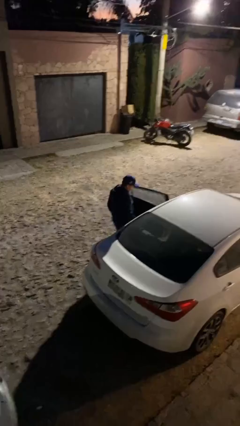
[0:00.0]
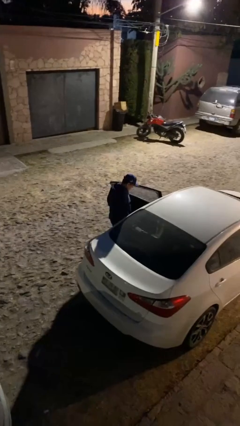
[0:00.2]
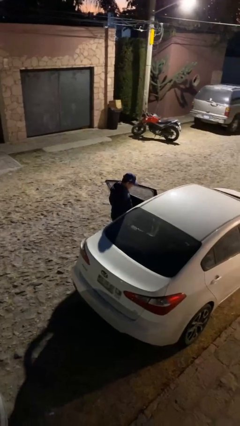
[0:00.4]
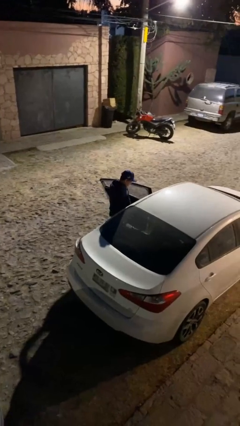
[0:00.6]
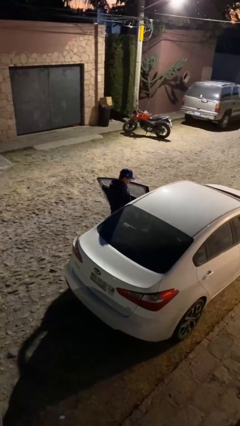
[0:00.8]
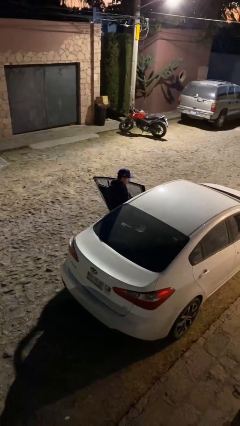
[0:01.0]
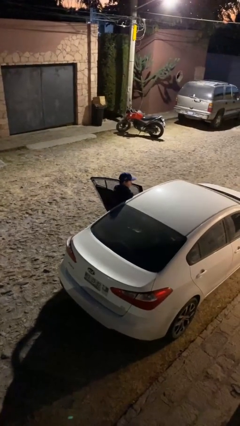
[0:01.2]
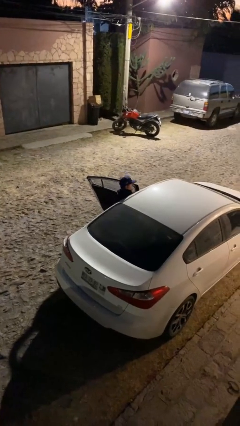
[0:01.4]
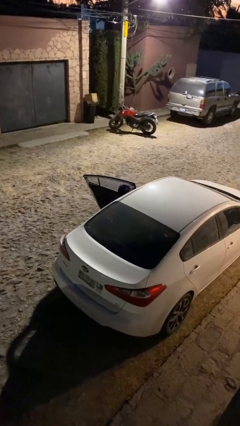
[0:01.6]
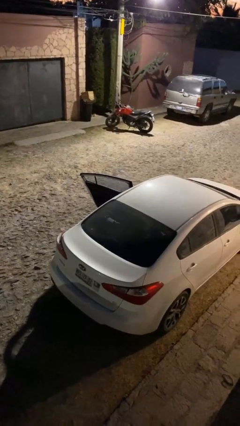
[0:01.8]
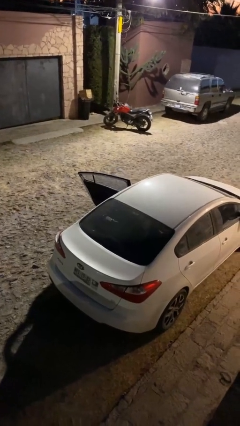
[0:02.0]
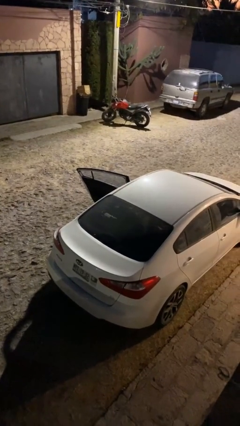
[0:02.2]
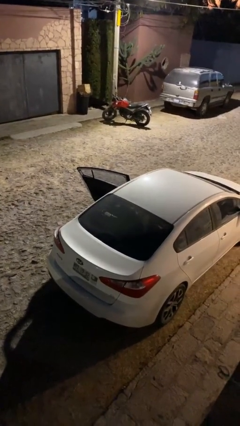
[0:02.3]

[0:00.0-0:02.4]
person enters car

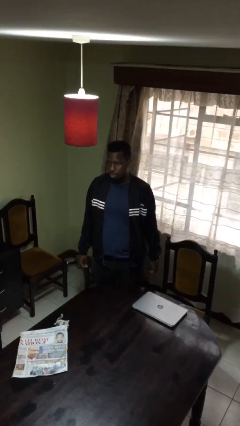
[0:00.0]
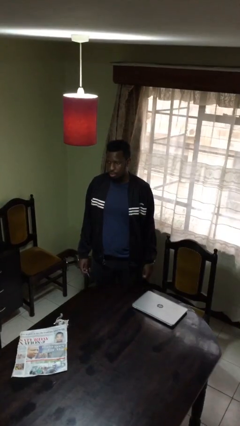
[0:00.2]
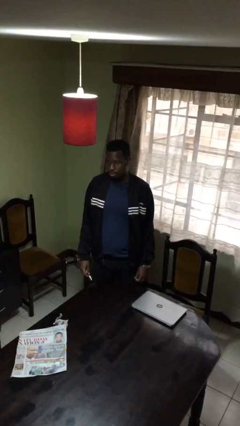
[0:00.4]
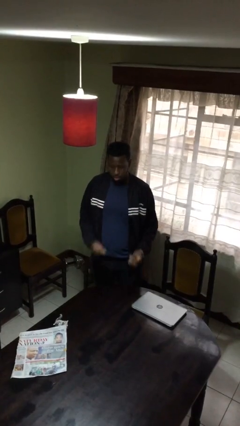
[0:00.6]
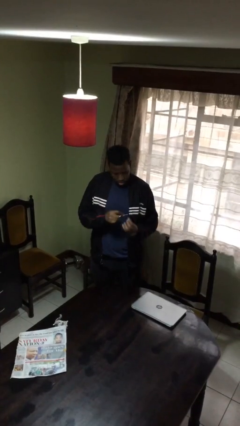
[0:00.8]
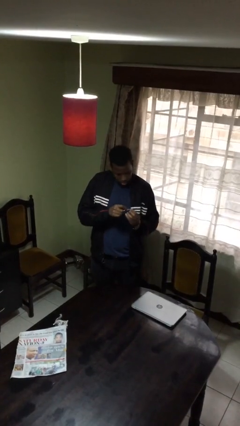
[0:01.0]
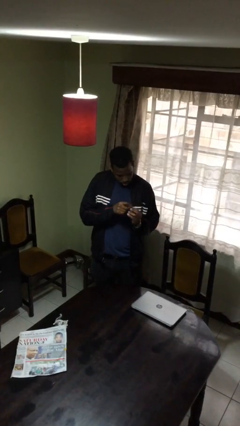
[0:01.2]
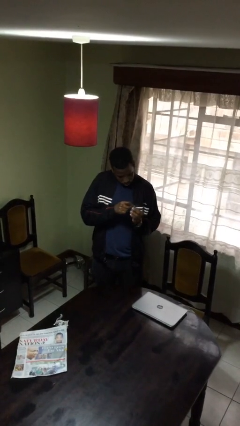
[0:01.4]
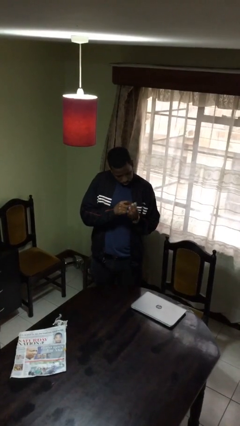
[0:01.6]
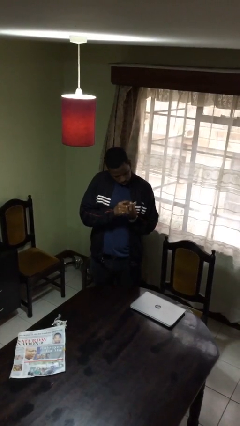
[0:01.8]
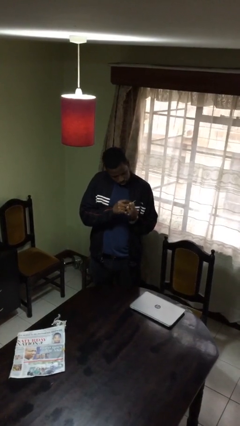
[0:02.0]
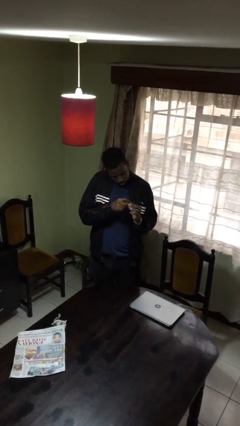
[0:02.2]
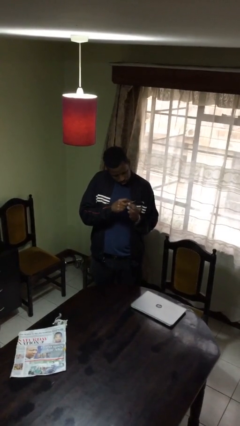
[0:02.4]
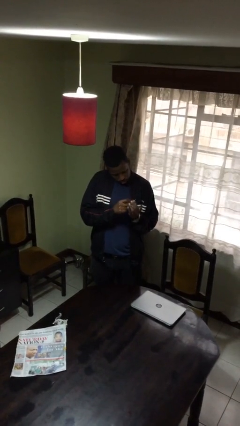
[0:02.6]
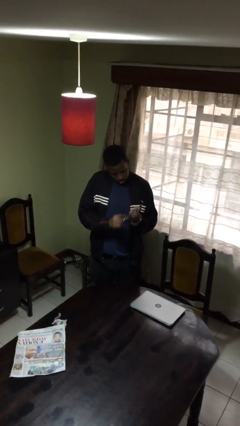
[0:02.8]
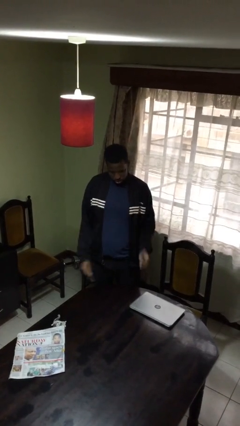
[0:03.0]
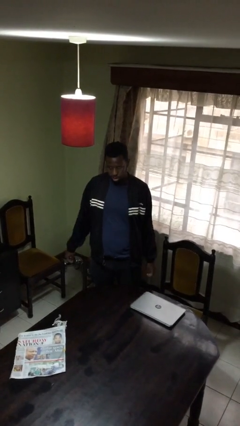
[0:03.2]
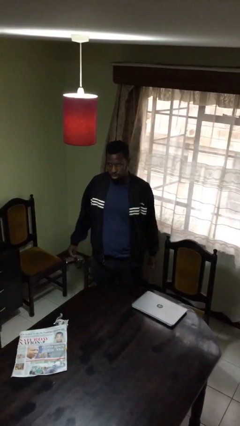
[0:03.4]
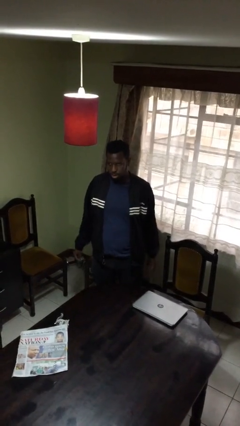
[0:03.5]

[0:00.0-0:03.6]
person files fingernails

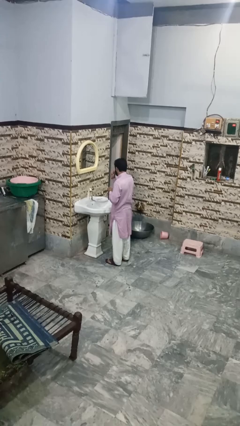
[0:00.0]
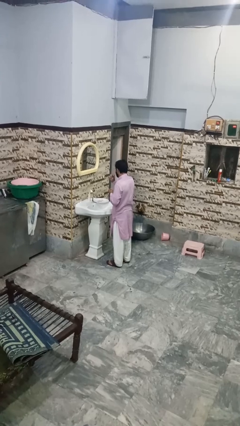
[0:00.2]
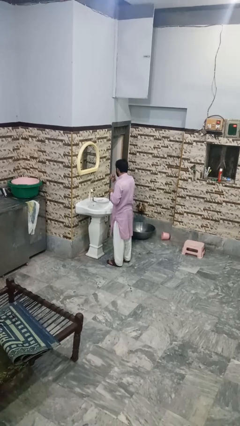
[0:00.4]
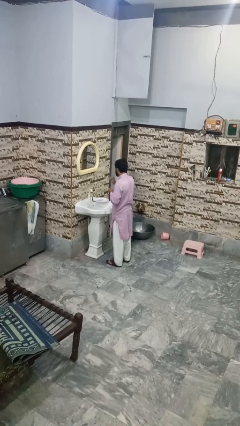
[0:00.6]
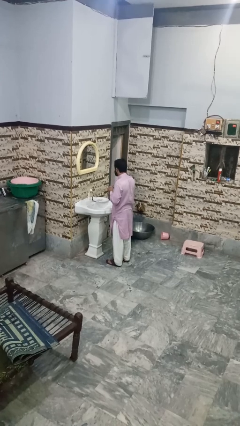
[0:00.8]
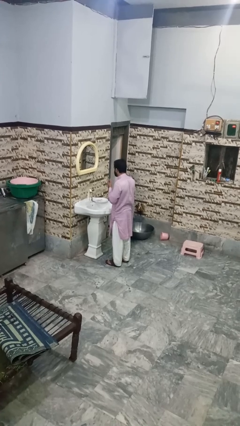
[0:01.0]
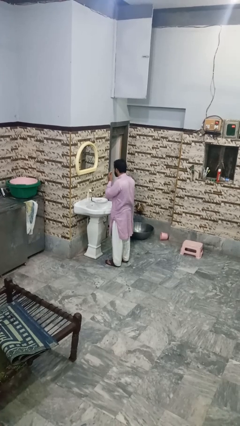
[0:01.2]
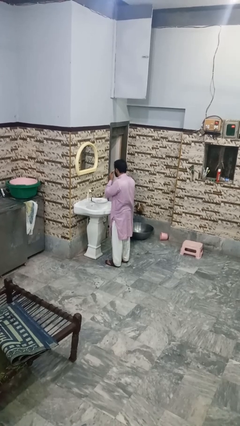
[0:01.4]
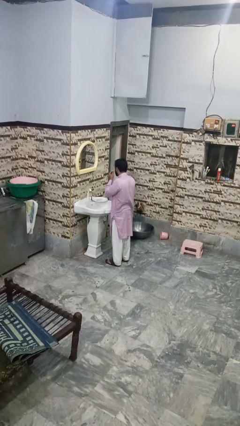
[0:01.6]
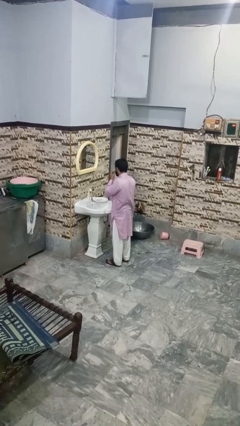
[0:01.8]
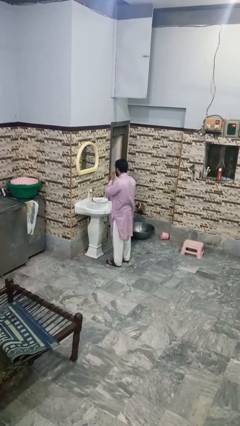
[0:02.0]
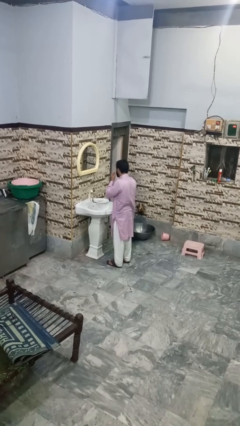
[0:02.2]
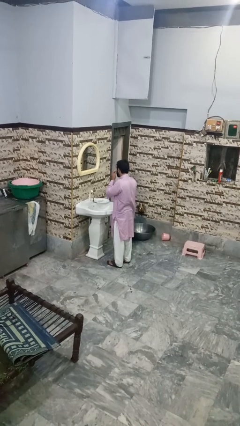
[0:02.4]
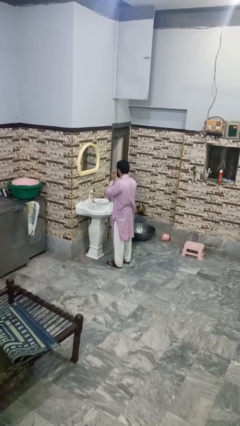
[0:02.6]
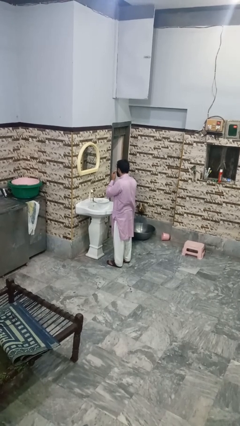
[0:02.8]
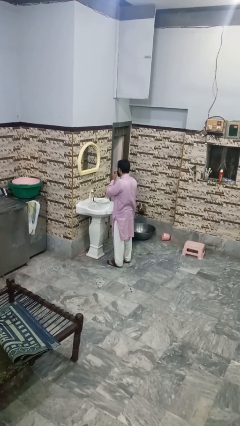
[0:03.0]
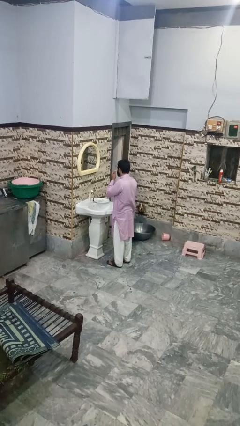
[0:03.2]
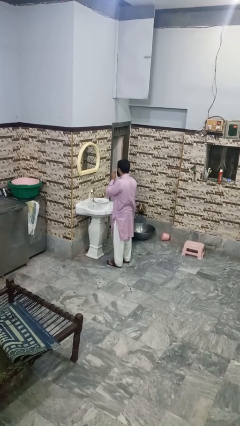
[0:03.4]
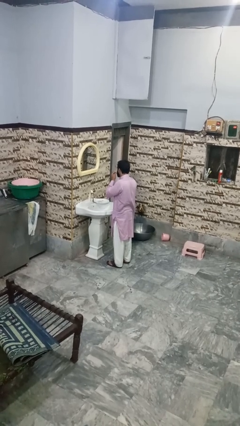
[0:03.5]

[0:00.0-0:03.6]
person applies shaving cream

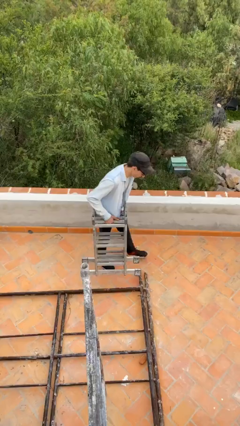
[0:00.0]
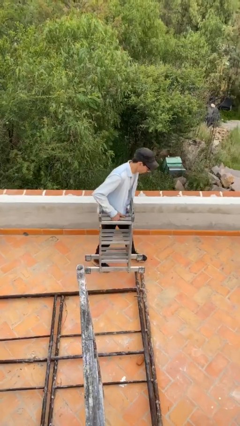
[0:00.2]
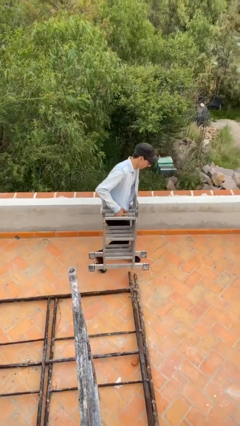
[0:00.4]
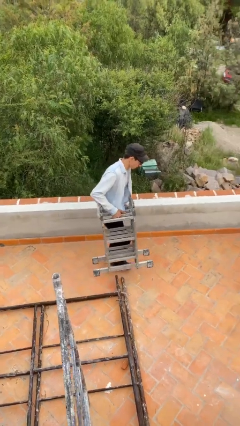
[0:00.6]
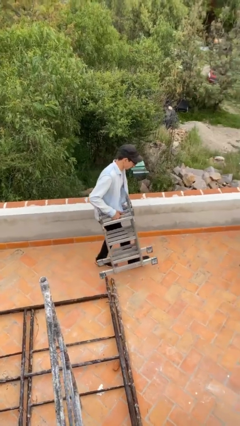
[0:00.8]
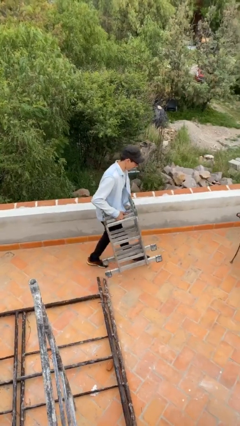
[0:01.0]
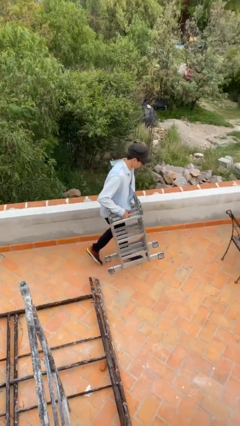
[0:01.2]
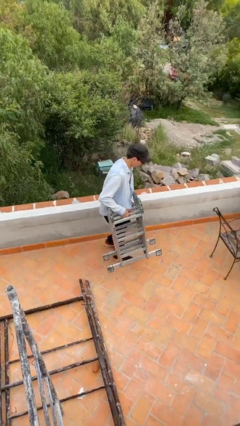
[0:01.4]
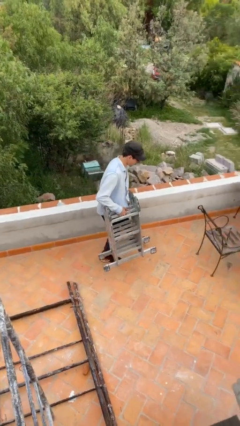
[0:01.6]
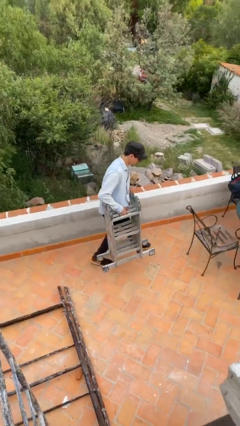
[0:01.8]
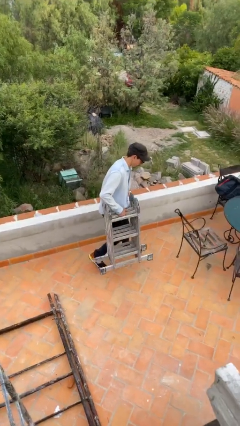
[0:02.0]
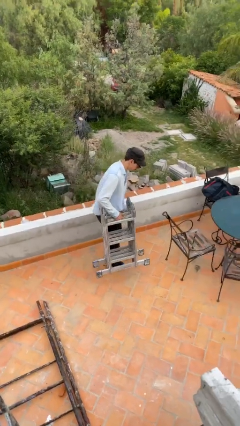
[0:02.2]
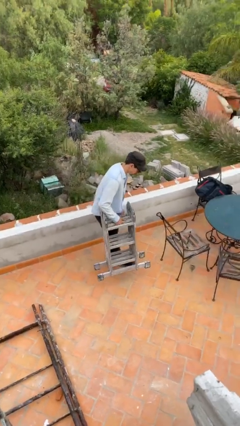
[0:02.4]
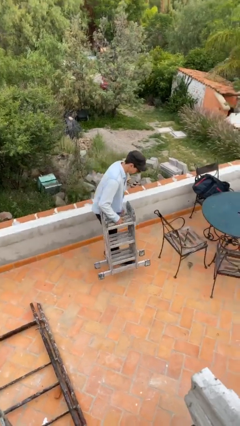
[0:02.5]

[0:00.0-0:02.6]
person carries heavy object

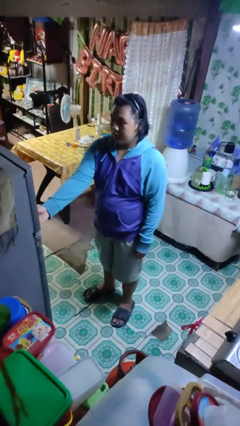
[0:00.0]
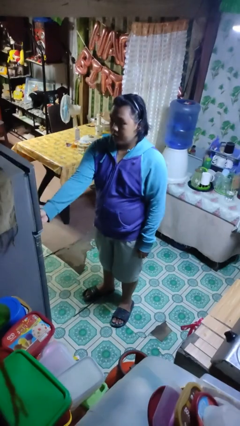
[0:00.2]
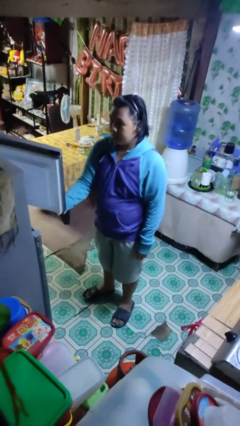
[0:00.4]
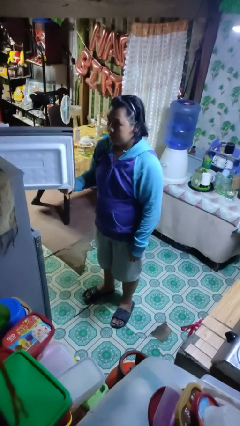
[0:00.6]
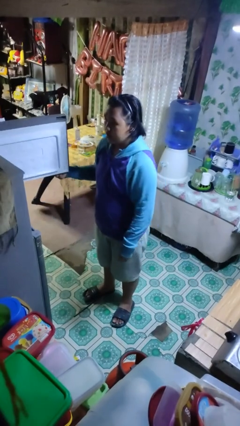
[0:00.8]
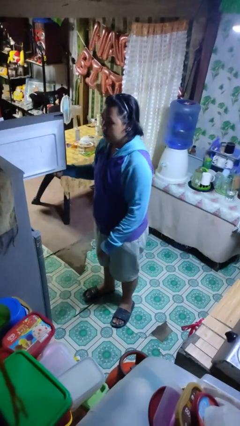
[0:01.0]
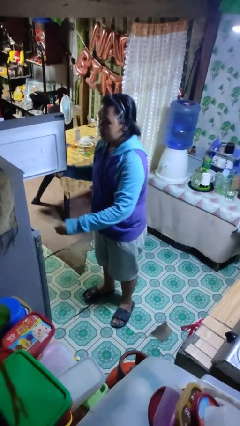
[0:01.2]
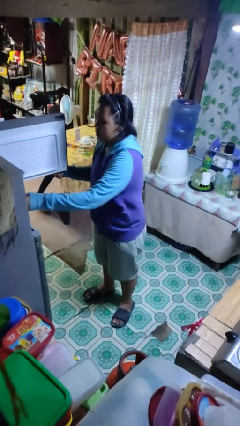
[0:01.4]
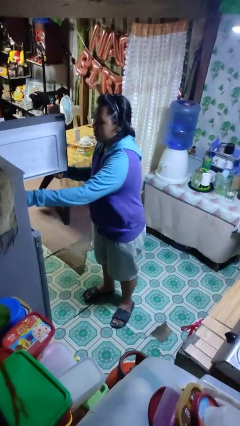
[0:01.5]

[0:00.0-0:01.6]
person opens refrigerator

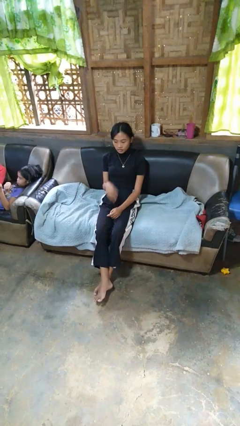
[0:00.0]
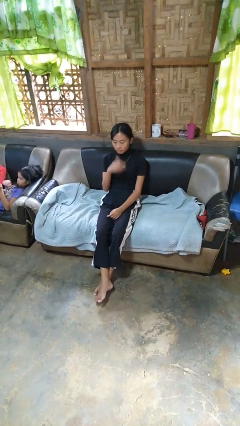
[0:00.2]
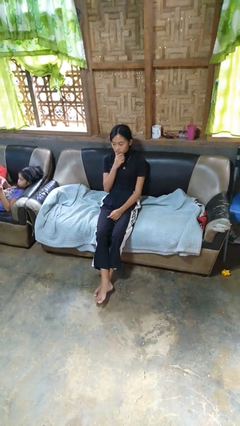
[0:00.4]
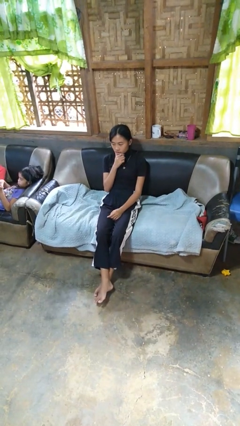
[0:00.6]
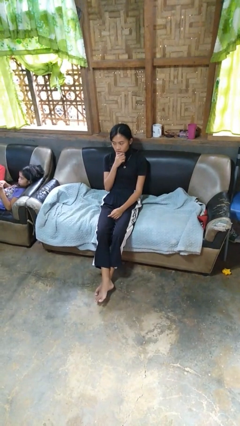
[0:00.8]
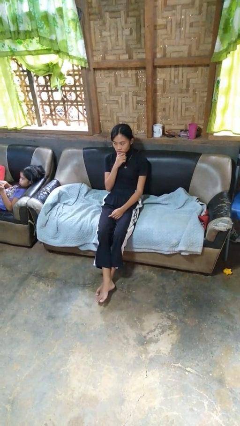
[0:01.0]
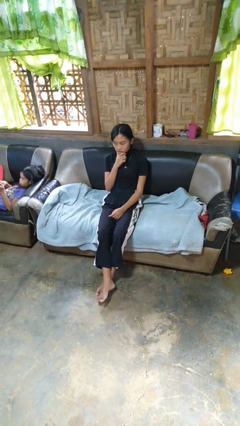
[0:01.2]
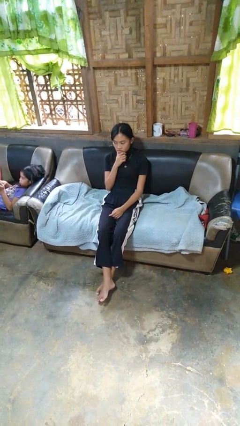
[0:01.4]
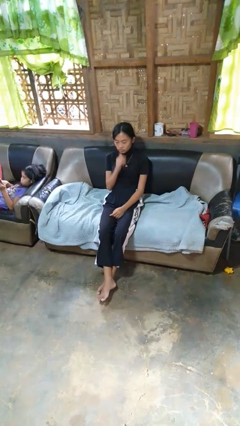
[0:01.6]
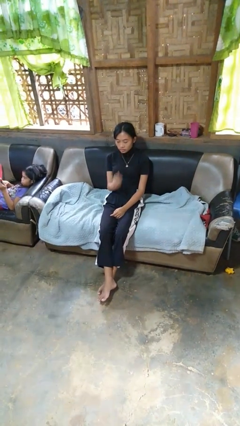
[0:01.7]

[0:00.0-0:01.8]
person strokes chin

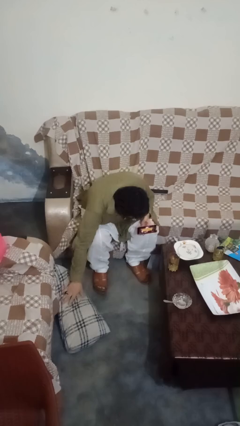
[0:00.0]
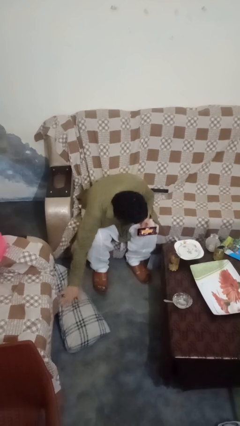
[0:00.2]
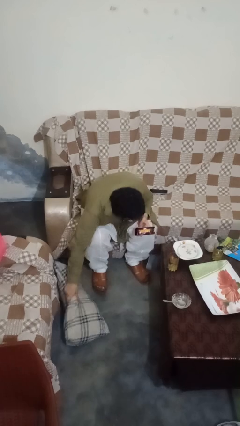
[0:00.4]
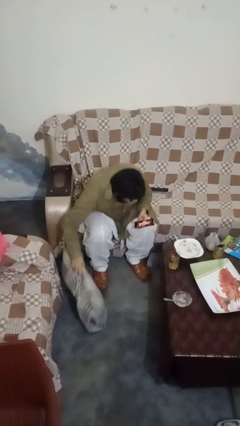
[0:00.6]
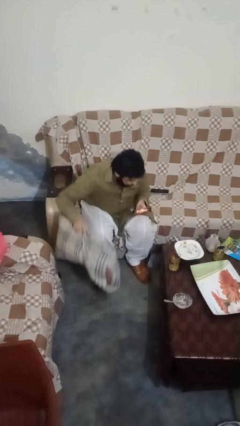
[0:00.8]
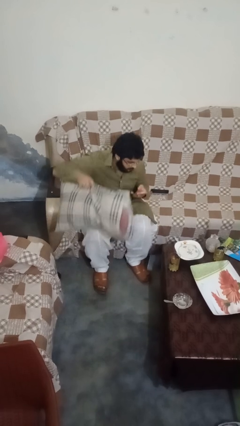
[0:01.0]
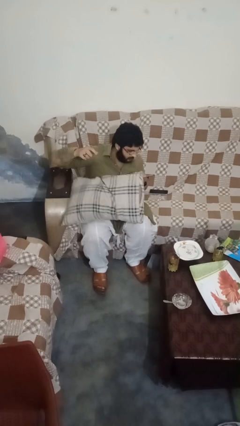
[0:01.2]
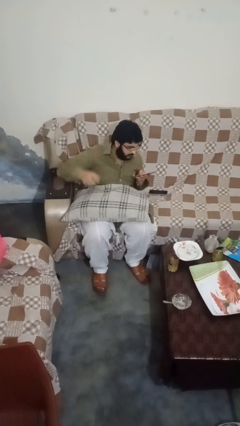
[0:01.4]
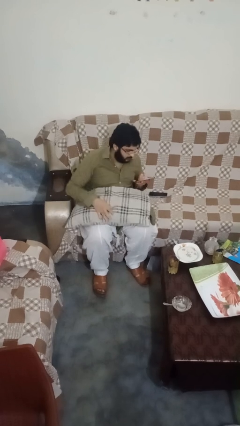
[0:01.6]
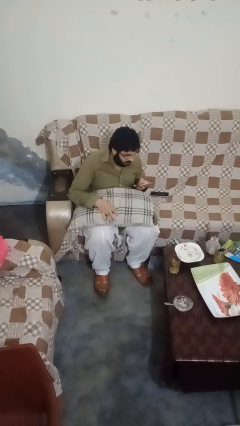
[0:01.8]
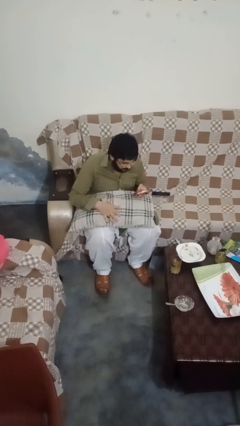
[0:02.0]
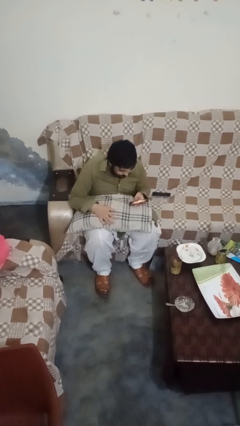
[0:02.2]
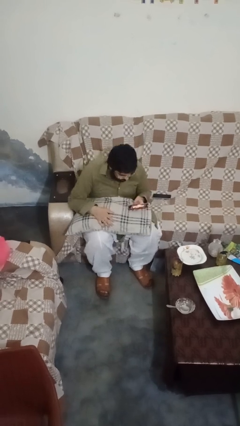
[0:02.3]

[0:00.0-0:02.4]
person picks up object from floor
